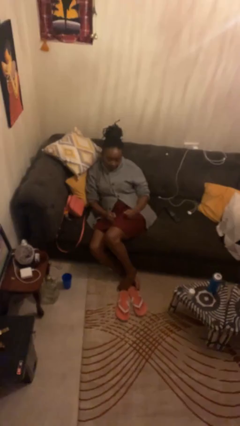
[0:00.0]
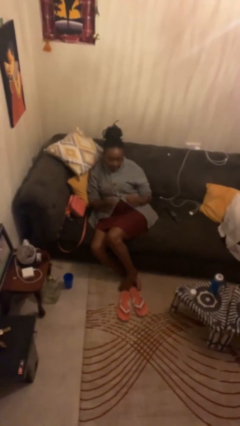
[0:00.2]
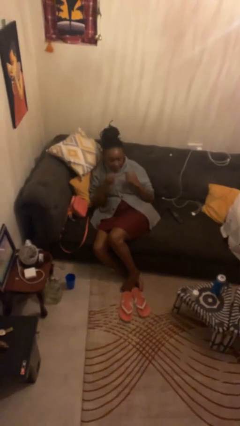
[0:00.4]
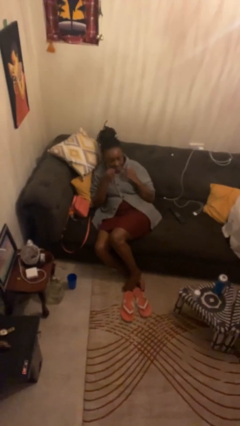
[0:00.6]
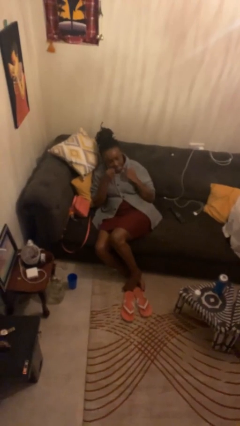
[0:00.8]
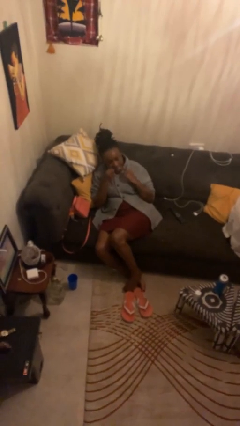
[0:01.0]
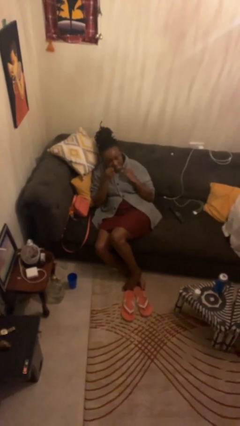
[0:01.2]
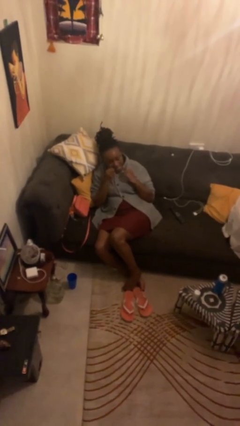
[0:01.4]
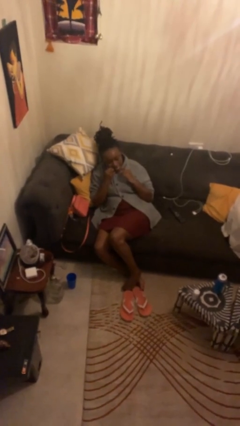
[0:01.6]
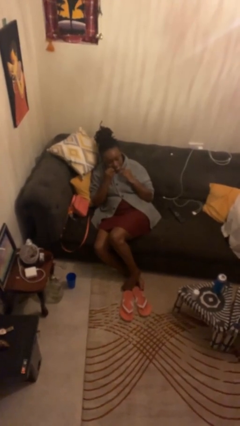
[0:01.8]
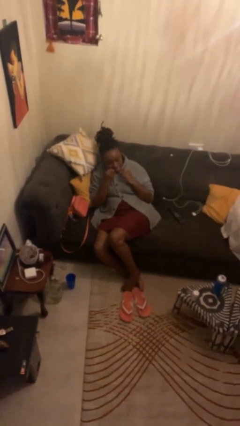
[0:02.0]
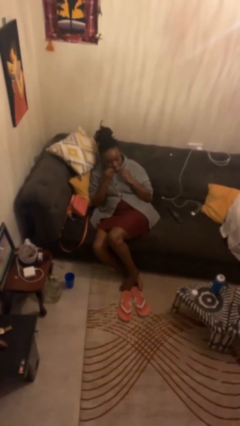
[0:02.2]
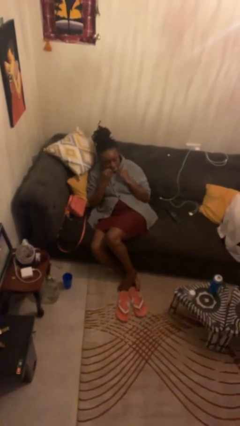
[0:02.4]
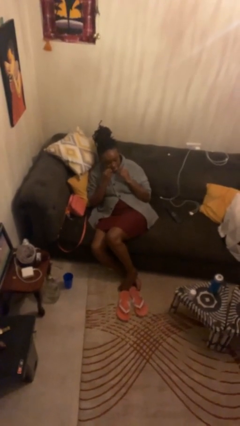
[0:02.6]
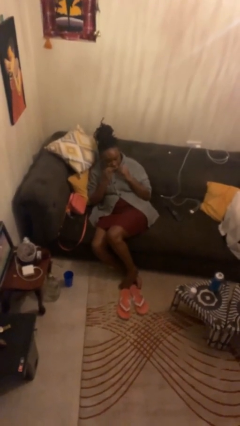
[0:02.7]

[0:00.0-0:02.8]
person flosses

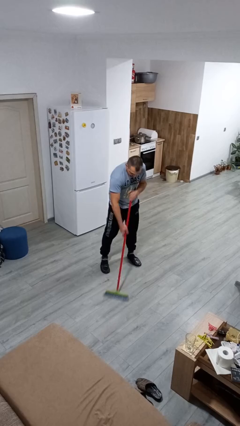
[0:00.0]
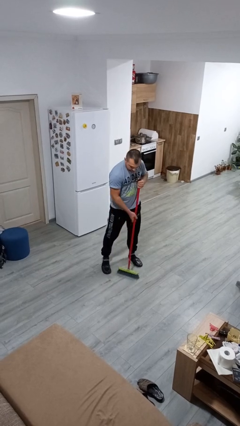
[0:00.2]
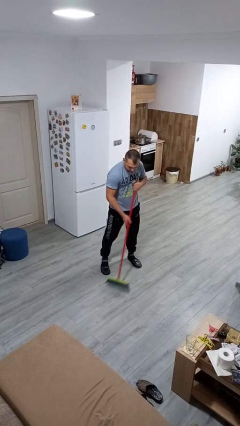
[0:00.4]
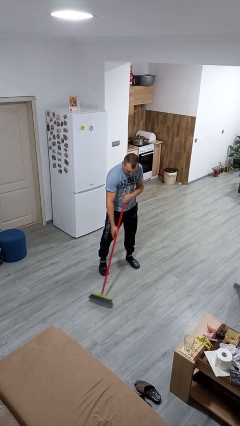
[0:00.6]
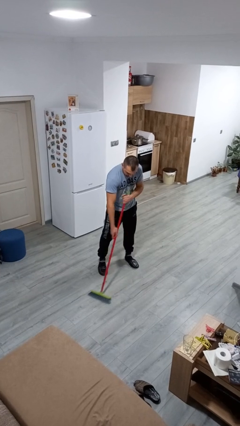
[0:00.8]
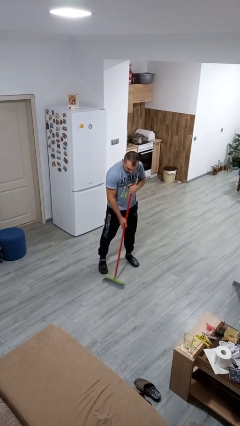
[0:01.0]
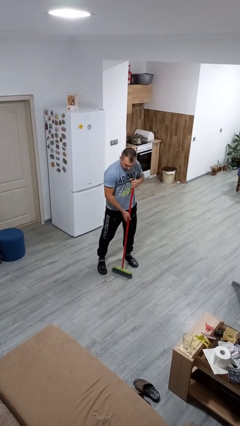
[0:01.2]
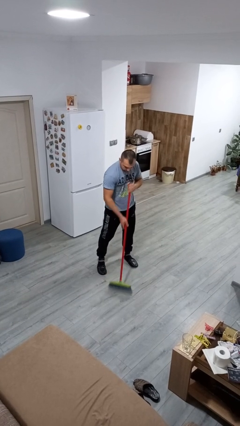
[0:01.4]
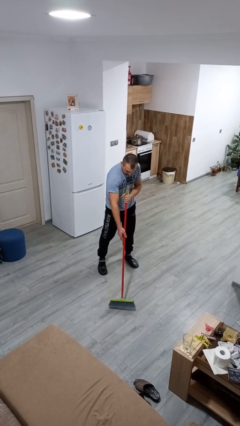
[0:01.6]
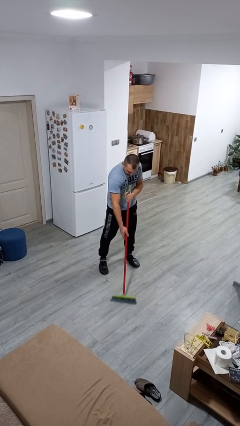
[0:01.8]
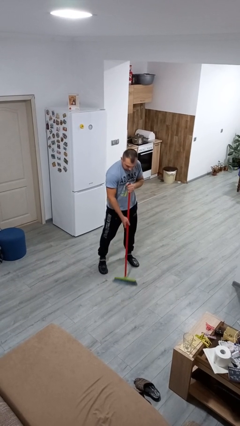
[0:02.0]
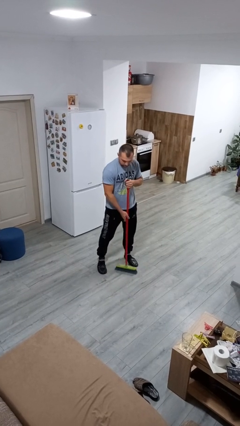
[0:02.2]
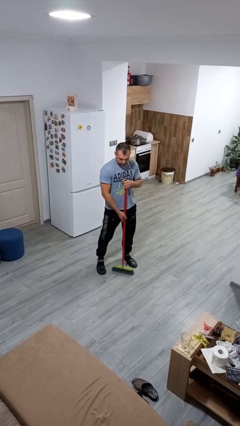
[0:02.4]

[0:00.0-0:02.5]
person sweeps floor

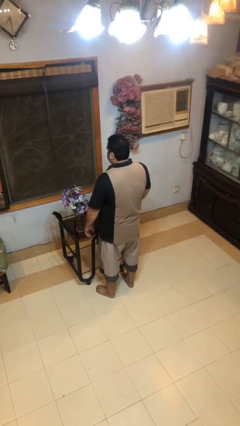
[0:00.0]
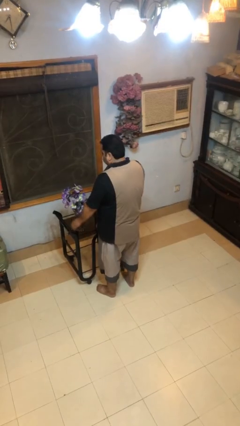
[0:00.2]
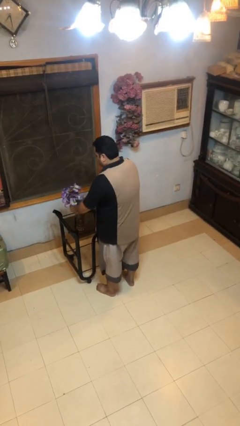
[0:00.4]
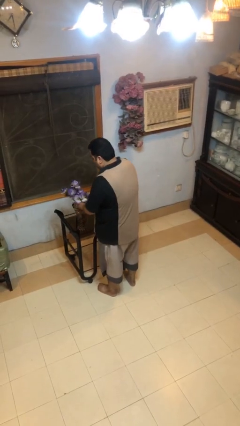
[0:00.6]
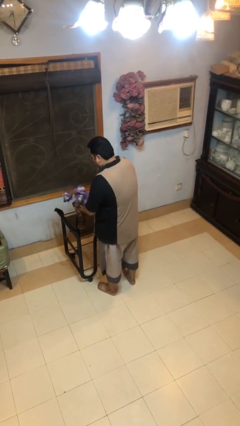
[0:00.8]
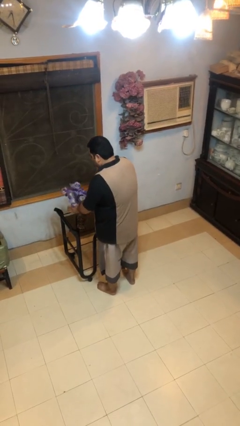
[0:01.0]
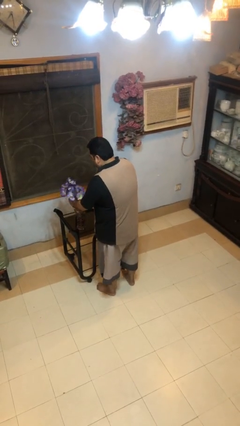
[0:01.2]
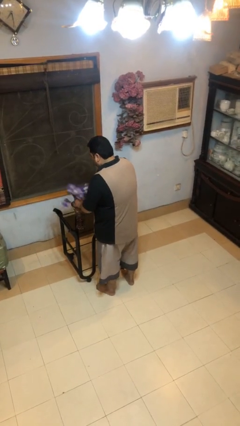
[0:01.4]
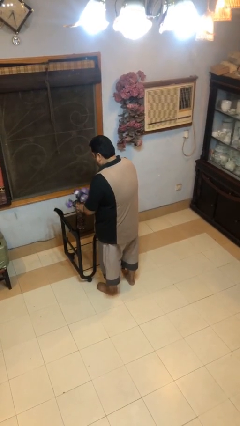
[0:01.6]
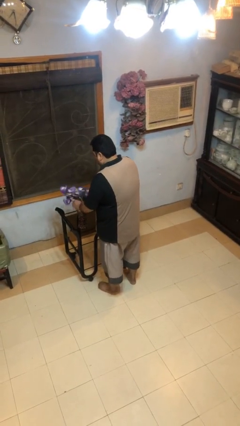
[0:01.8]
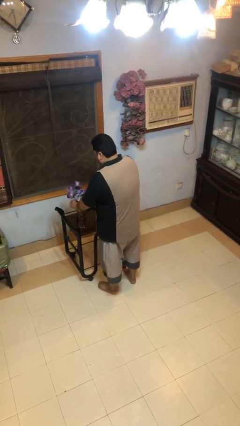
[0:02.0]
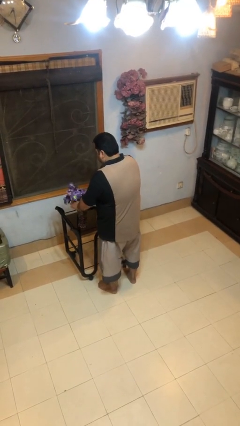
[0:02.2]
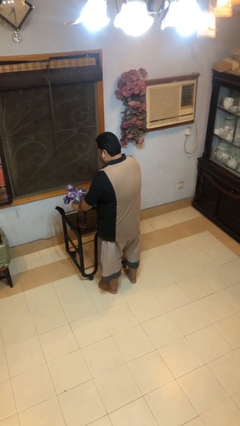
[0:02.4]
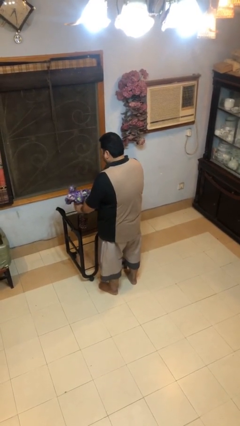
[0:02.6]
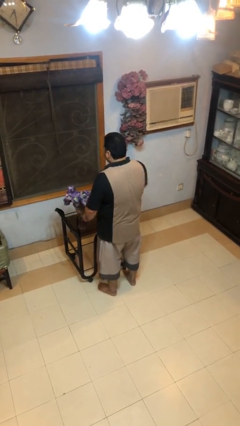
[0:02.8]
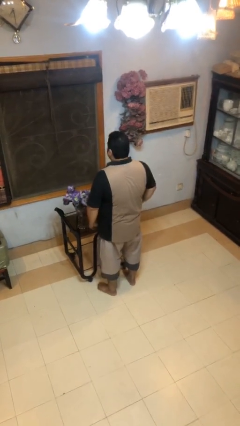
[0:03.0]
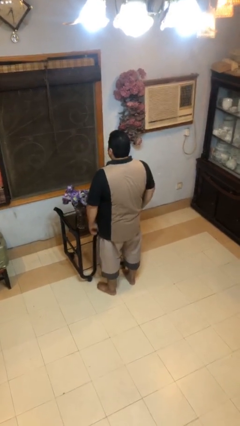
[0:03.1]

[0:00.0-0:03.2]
person arranges flowers in vase

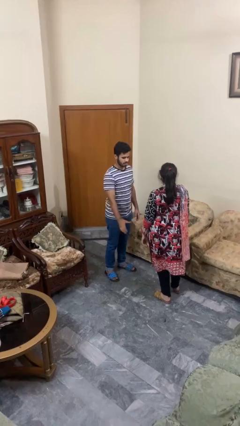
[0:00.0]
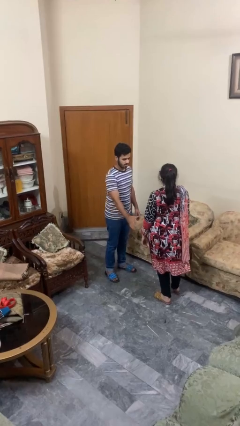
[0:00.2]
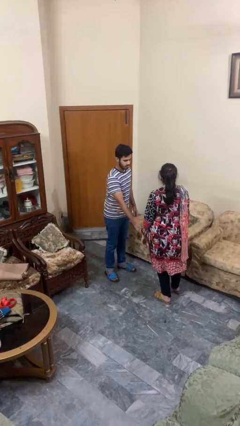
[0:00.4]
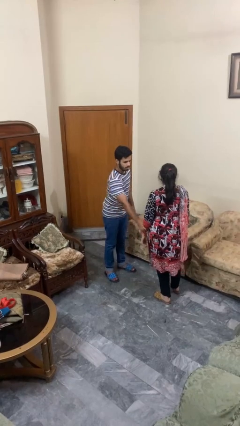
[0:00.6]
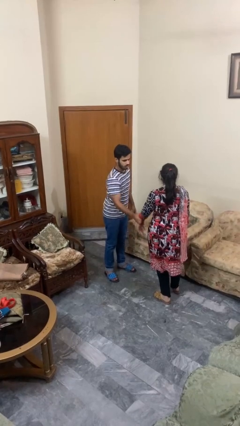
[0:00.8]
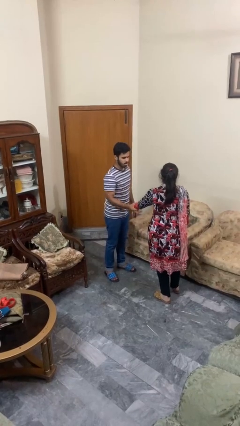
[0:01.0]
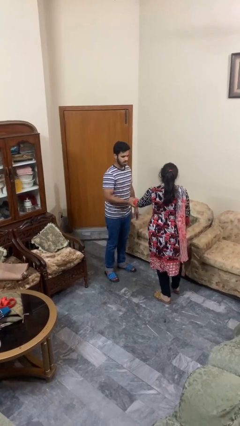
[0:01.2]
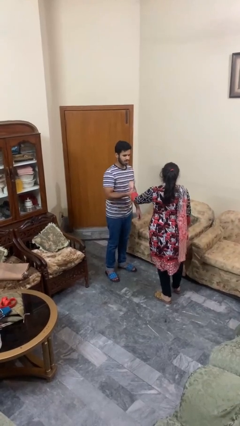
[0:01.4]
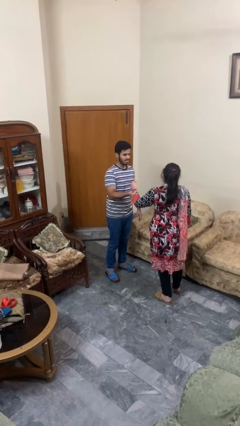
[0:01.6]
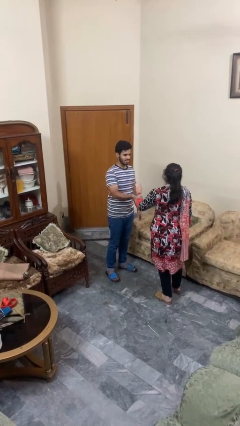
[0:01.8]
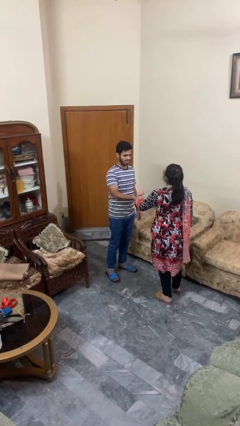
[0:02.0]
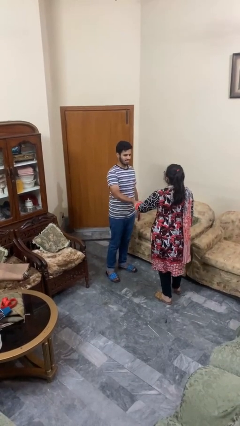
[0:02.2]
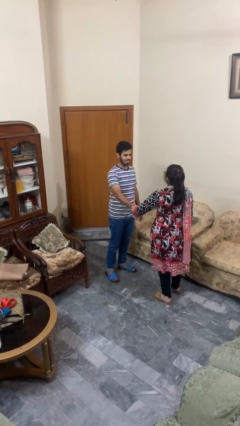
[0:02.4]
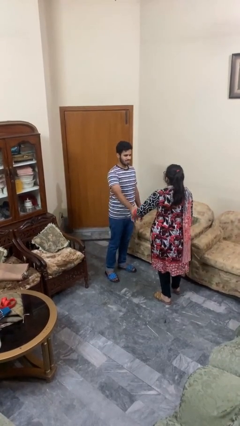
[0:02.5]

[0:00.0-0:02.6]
person grabs person by forearm

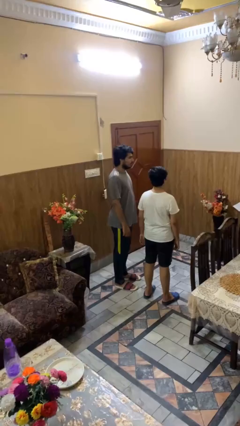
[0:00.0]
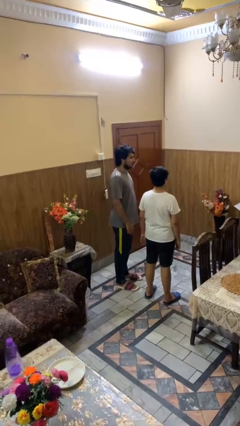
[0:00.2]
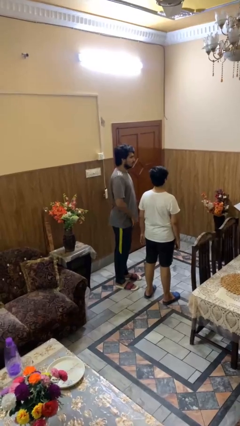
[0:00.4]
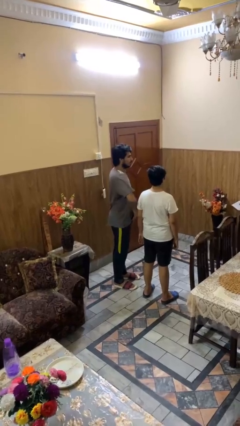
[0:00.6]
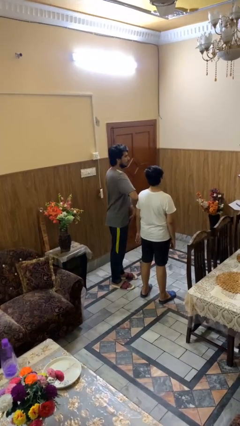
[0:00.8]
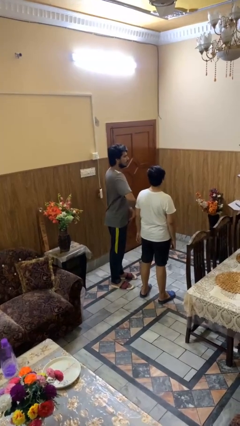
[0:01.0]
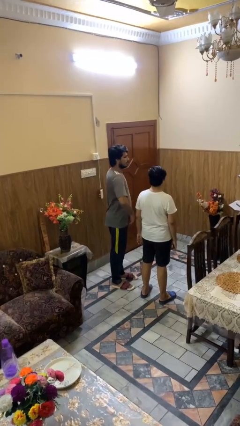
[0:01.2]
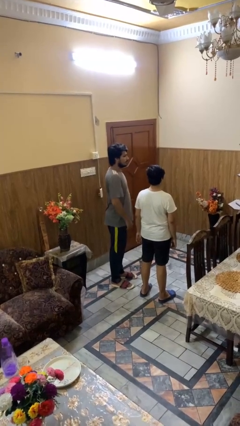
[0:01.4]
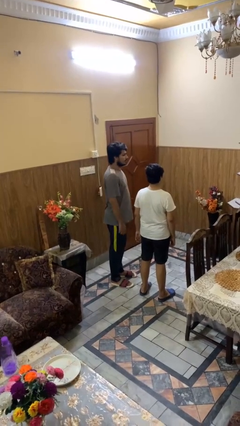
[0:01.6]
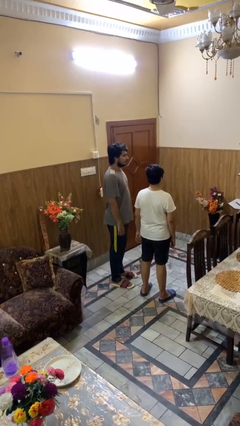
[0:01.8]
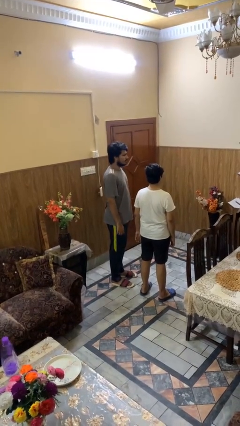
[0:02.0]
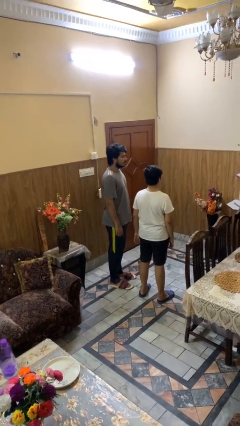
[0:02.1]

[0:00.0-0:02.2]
person nudges person with elbow

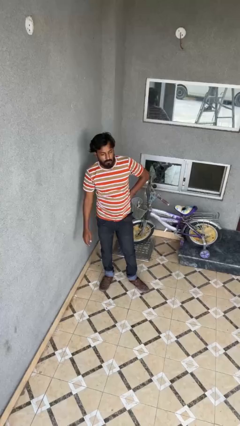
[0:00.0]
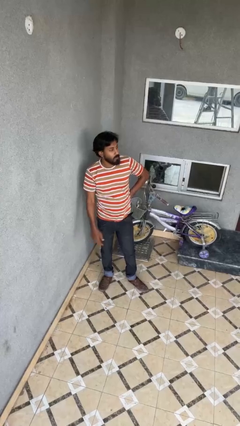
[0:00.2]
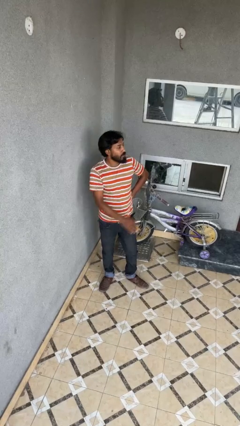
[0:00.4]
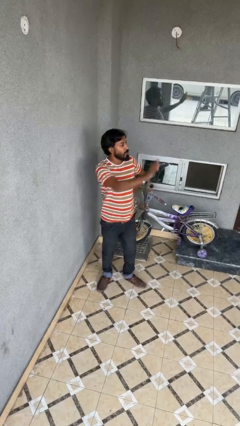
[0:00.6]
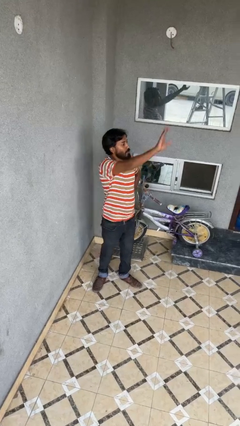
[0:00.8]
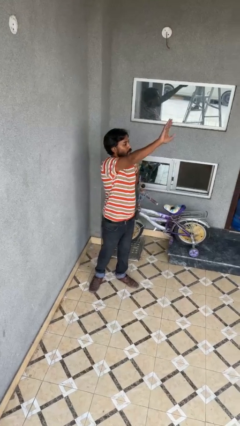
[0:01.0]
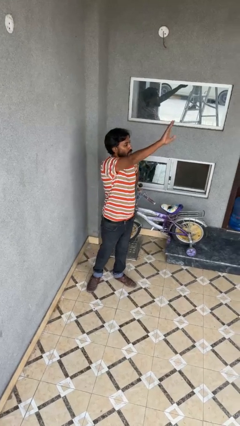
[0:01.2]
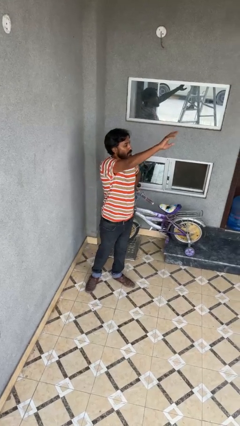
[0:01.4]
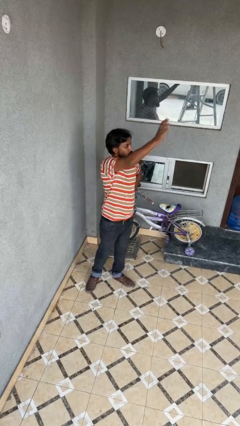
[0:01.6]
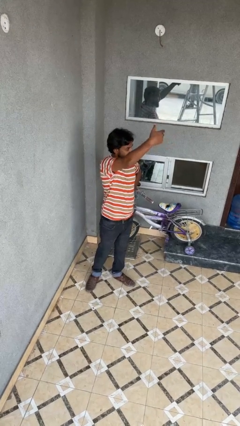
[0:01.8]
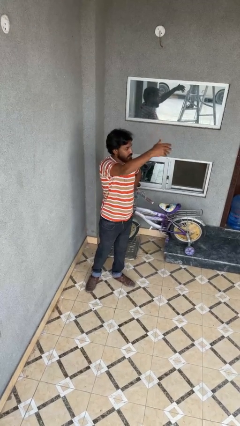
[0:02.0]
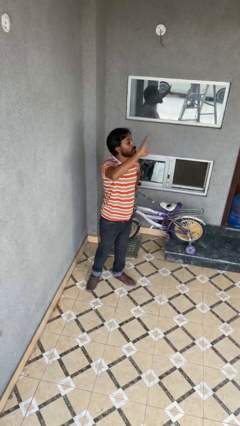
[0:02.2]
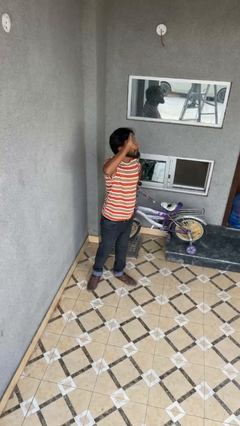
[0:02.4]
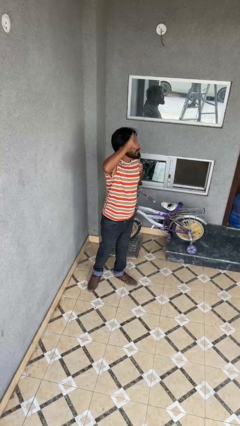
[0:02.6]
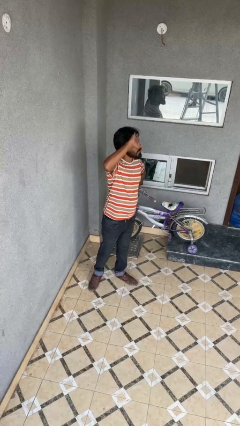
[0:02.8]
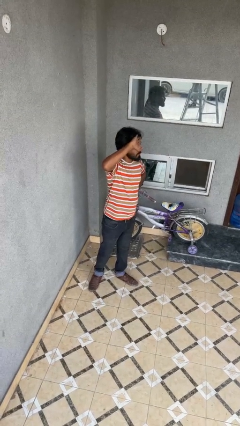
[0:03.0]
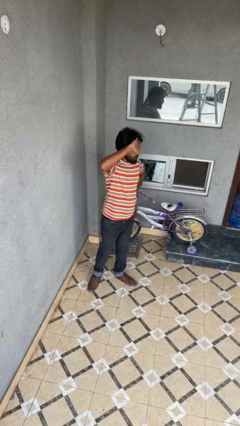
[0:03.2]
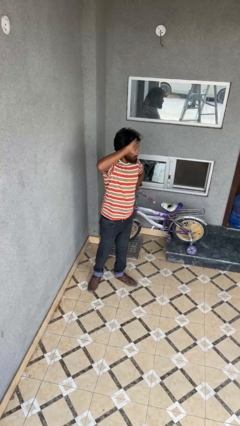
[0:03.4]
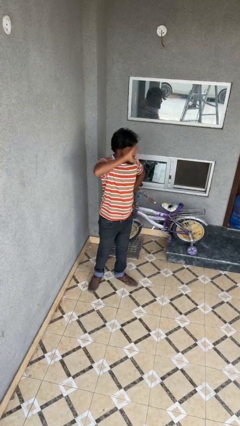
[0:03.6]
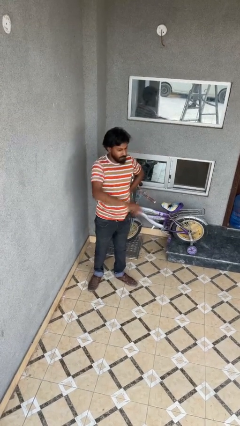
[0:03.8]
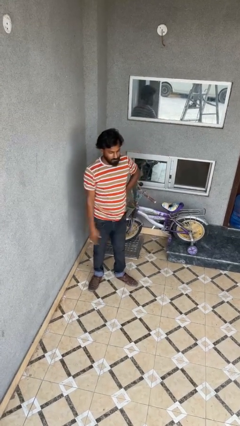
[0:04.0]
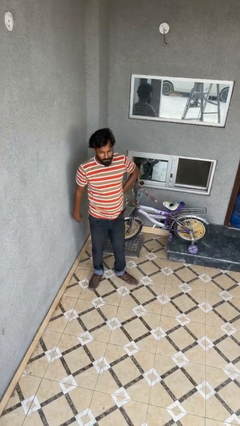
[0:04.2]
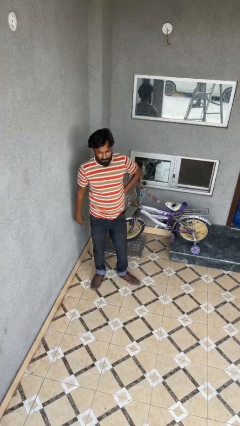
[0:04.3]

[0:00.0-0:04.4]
person waves at person
